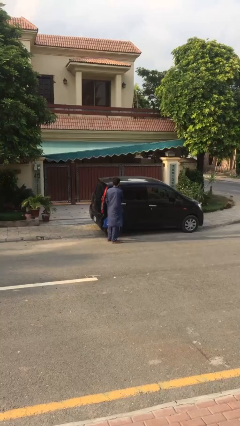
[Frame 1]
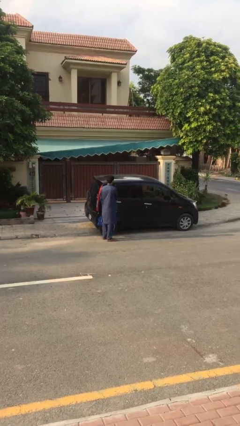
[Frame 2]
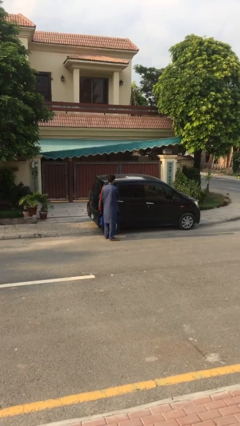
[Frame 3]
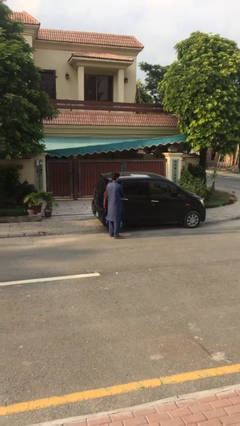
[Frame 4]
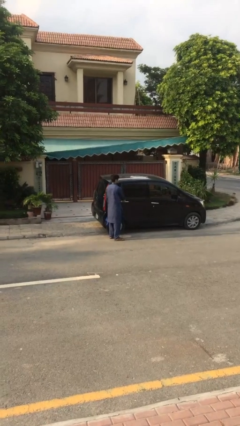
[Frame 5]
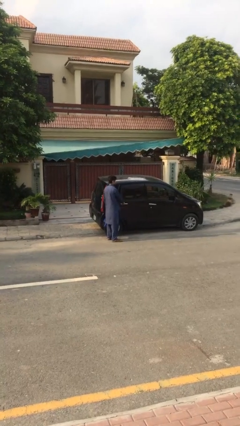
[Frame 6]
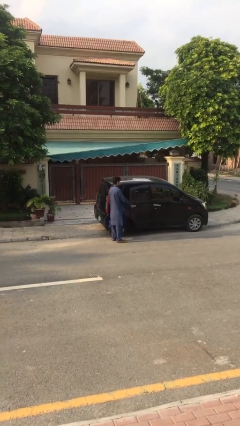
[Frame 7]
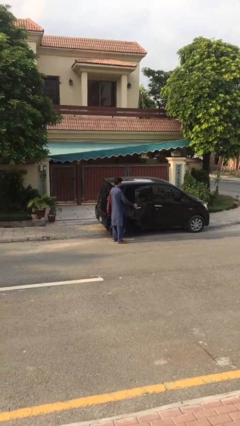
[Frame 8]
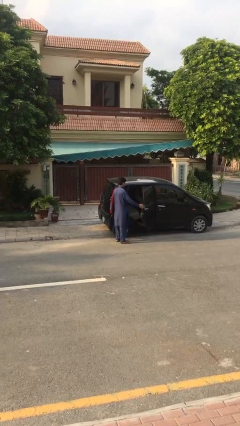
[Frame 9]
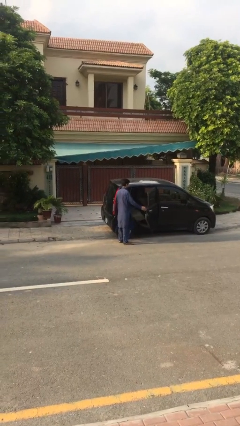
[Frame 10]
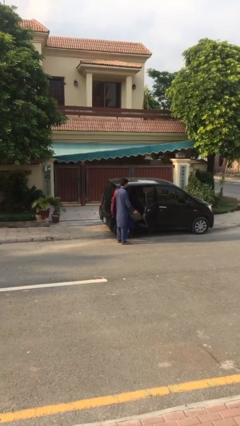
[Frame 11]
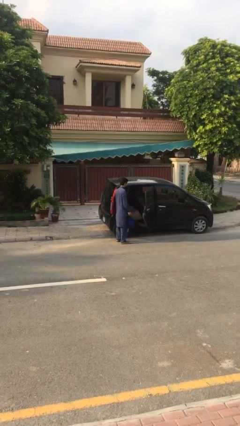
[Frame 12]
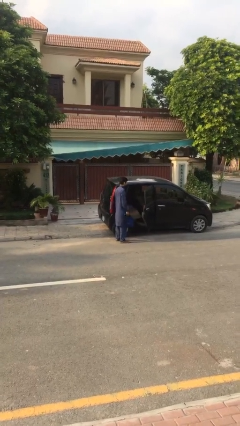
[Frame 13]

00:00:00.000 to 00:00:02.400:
person opens car door

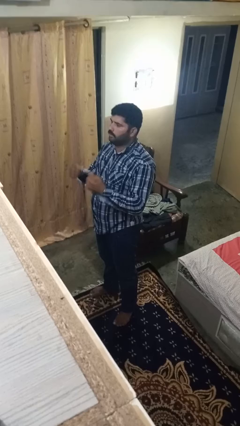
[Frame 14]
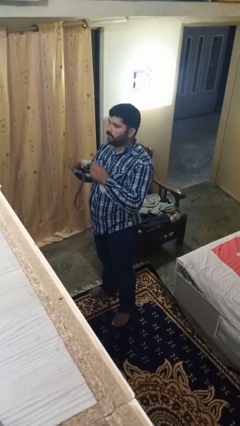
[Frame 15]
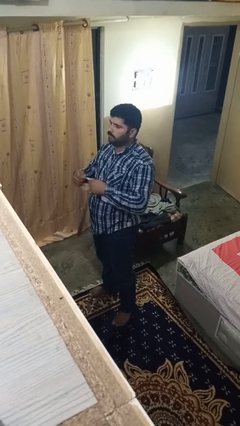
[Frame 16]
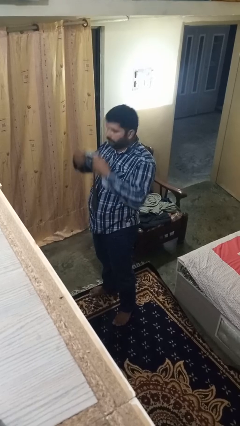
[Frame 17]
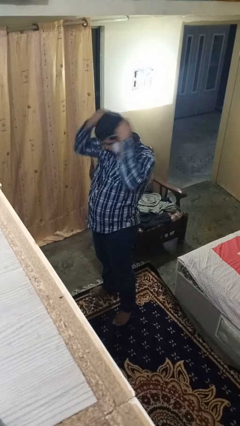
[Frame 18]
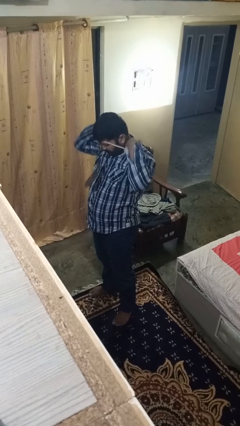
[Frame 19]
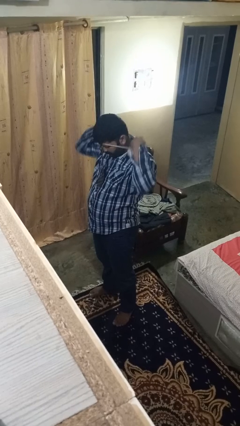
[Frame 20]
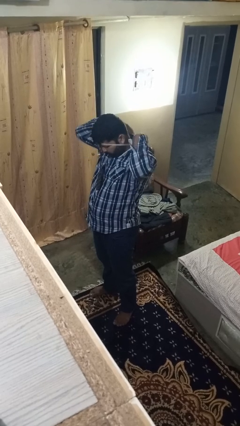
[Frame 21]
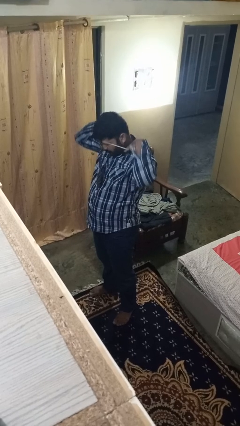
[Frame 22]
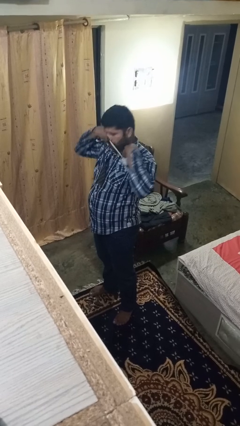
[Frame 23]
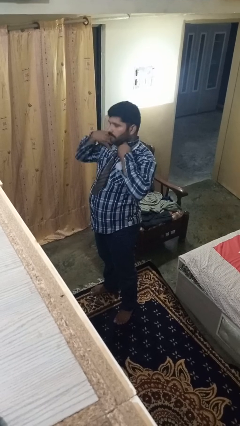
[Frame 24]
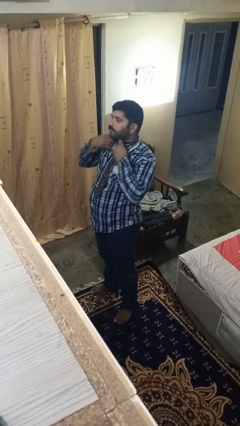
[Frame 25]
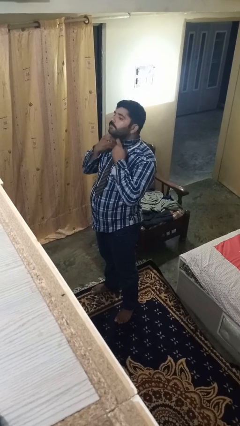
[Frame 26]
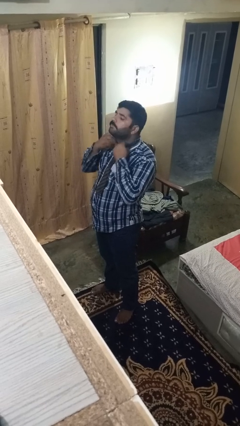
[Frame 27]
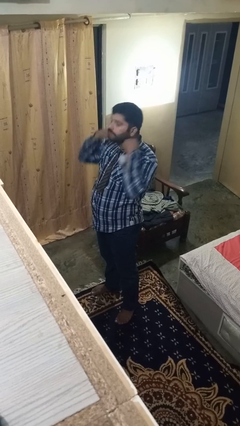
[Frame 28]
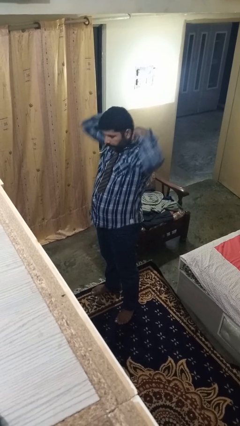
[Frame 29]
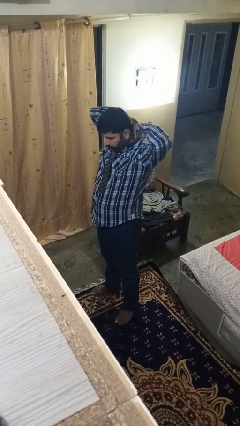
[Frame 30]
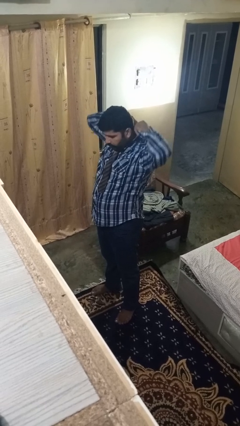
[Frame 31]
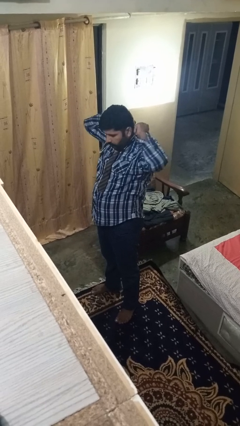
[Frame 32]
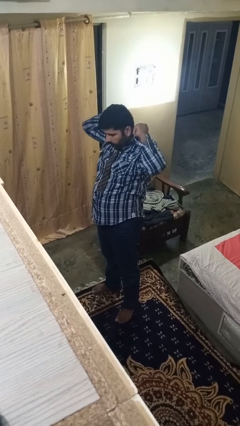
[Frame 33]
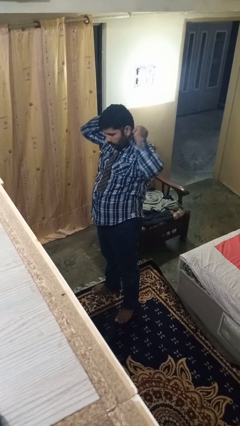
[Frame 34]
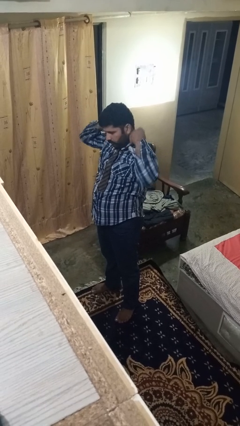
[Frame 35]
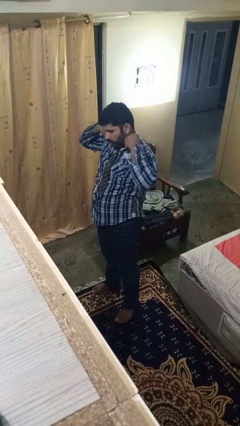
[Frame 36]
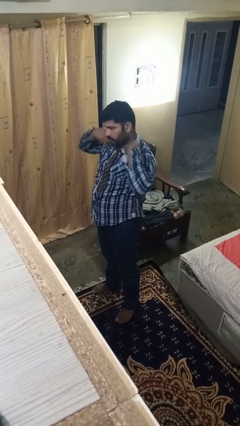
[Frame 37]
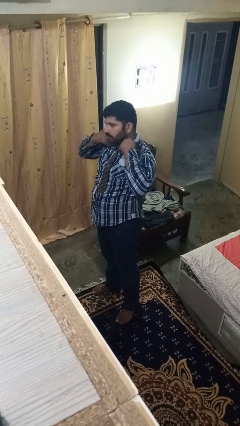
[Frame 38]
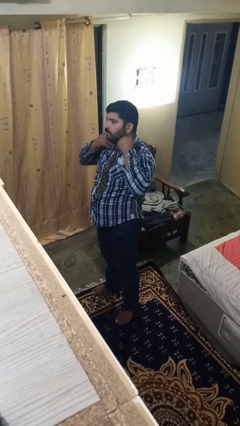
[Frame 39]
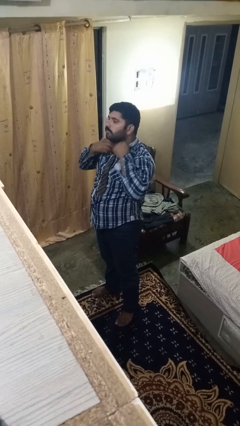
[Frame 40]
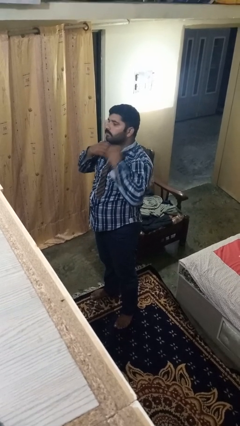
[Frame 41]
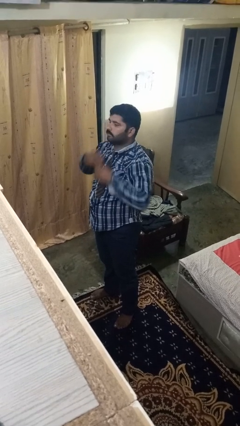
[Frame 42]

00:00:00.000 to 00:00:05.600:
person puts on necktie

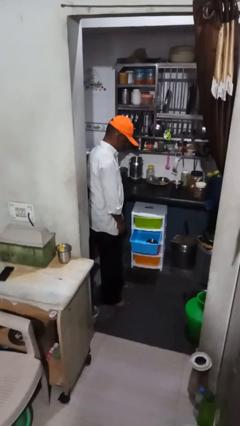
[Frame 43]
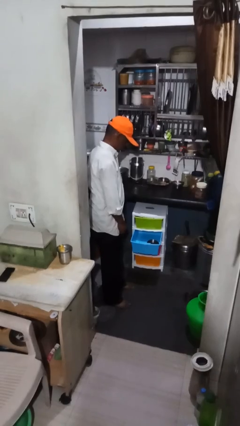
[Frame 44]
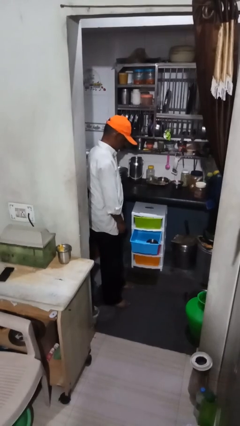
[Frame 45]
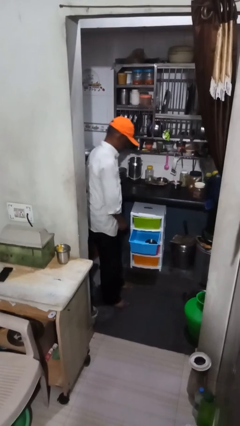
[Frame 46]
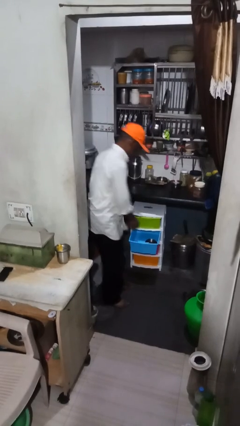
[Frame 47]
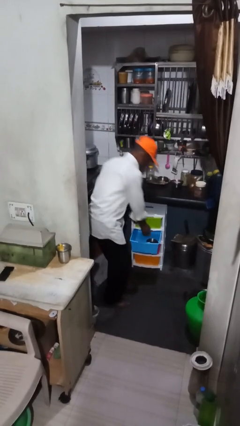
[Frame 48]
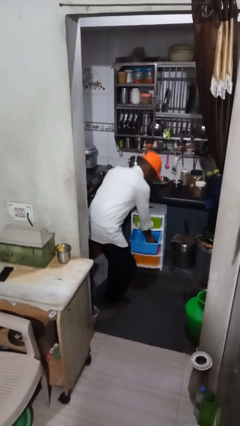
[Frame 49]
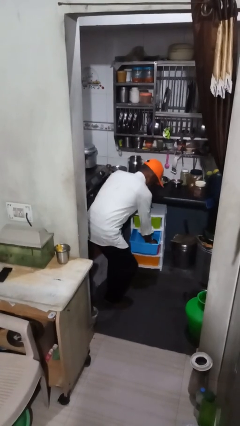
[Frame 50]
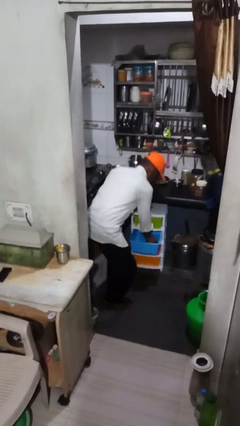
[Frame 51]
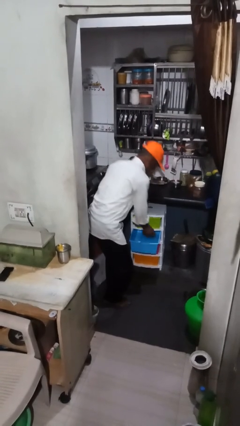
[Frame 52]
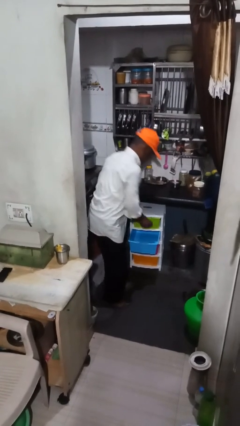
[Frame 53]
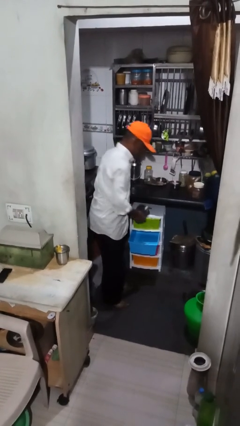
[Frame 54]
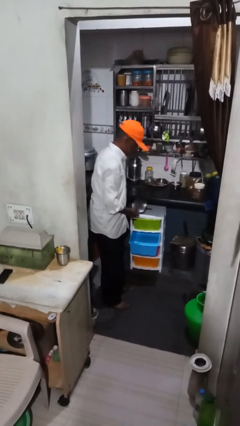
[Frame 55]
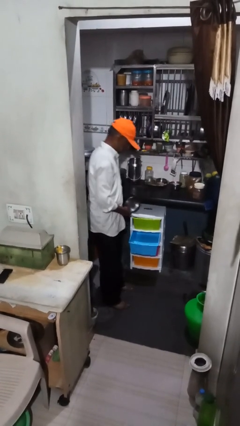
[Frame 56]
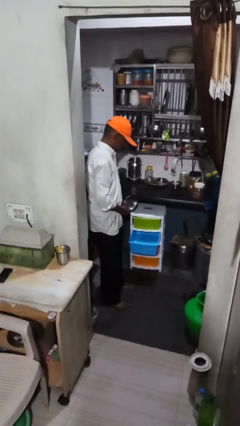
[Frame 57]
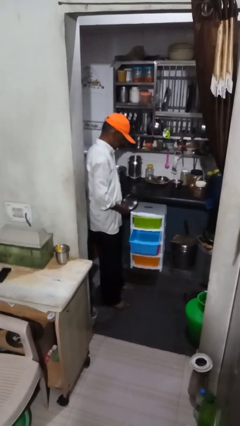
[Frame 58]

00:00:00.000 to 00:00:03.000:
person takes object from cabinet

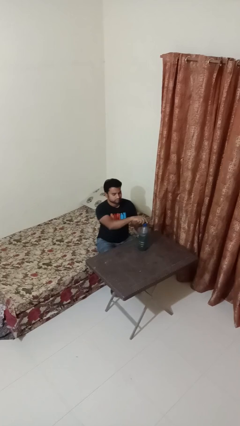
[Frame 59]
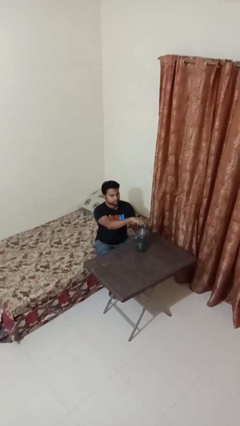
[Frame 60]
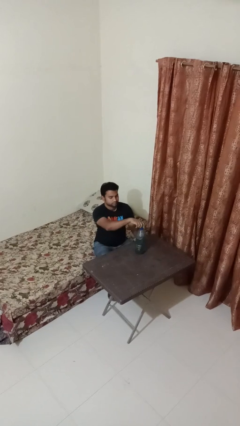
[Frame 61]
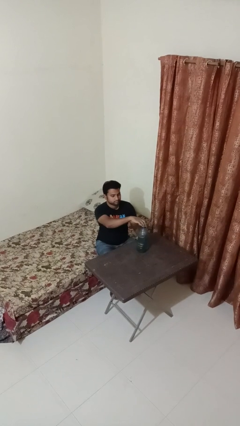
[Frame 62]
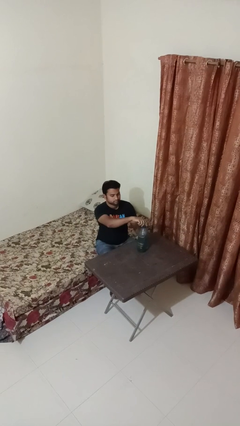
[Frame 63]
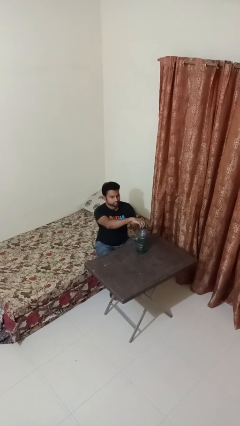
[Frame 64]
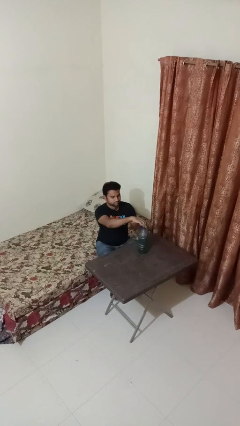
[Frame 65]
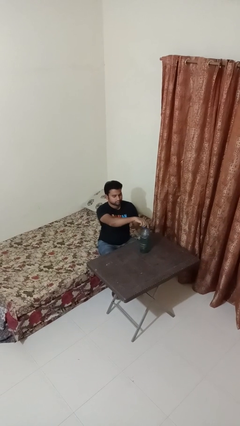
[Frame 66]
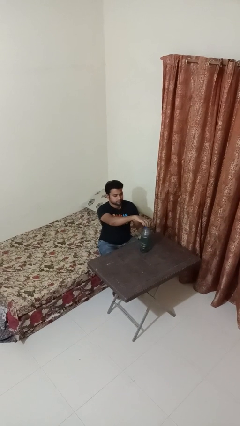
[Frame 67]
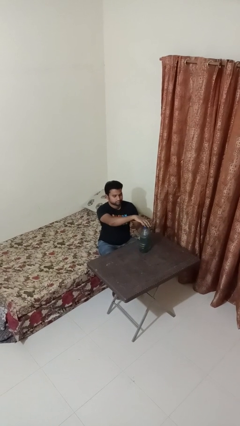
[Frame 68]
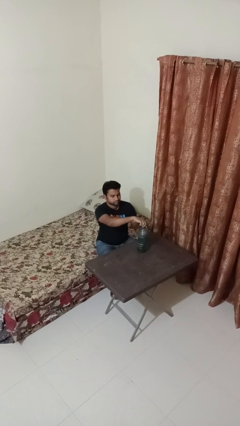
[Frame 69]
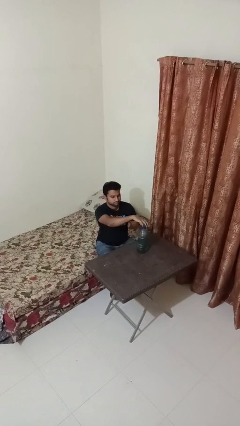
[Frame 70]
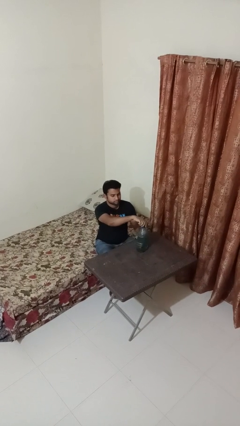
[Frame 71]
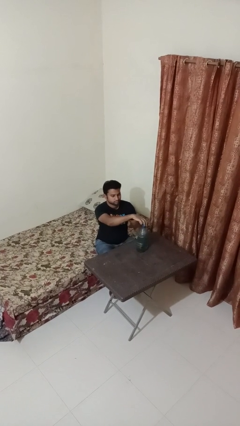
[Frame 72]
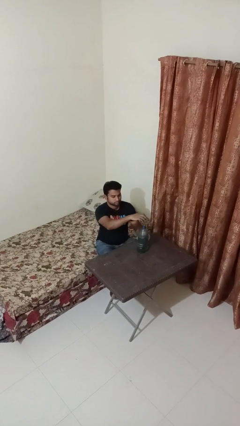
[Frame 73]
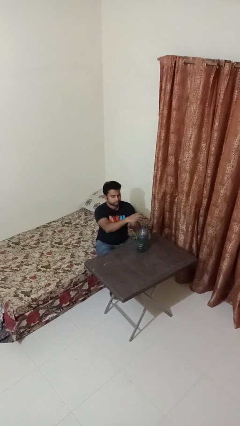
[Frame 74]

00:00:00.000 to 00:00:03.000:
person unscrews lid from bottle

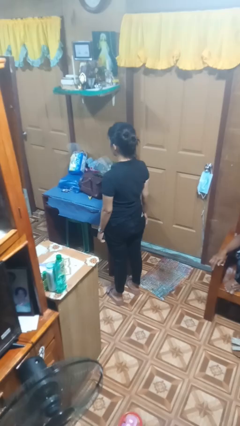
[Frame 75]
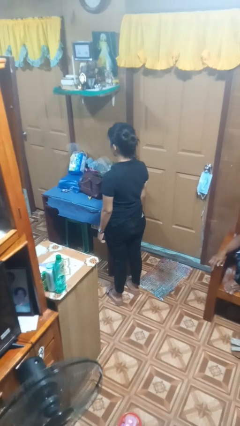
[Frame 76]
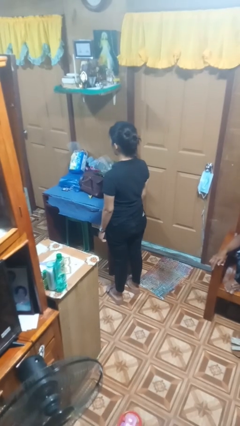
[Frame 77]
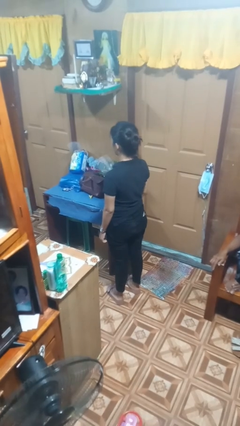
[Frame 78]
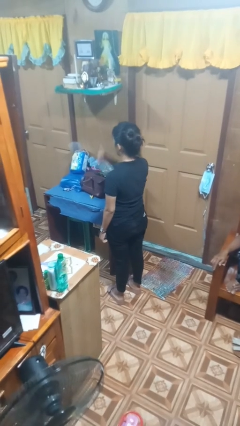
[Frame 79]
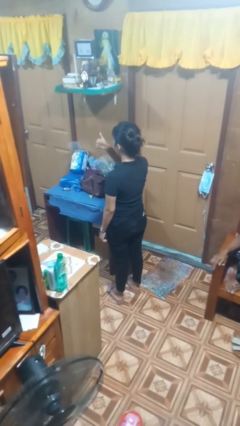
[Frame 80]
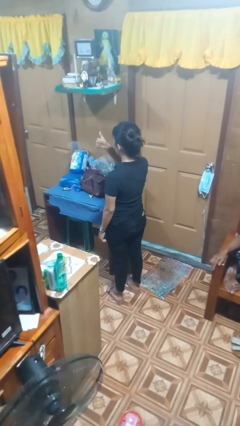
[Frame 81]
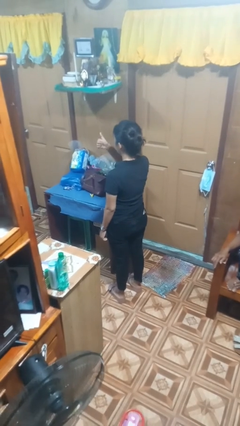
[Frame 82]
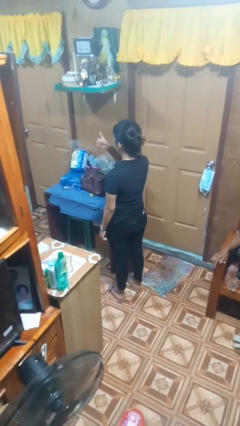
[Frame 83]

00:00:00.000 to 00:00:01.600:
person gestures thumbs up

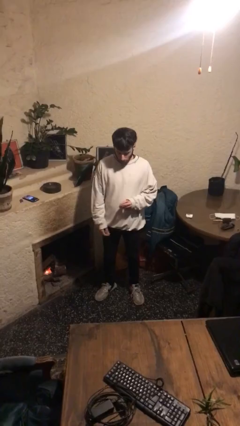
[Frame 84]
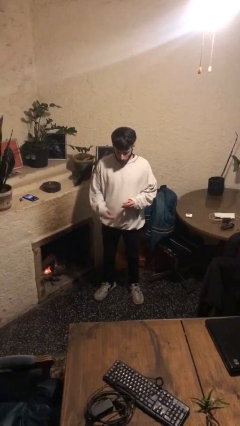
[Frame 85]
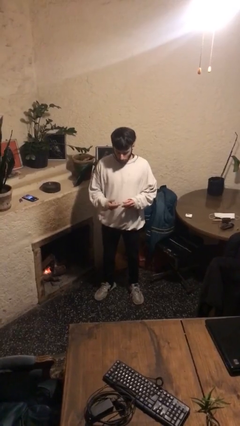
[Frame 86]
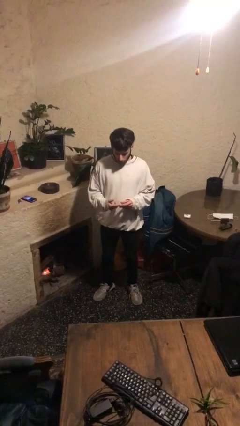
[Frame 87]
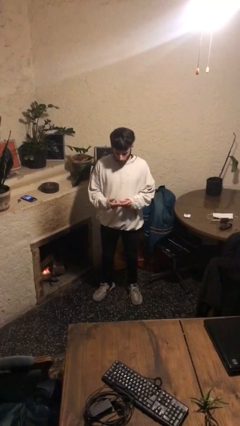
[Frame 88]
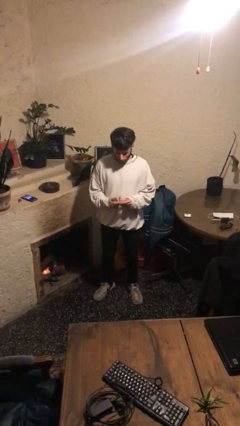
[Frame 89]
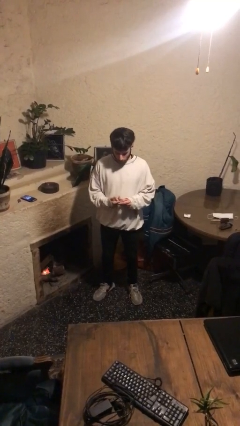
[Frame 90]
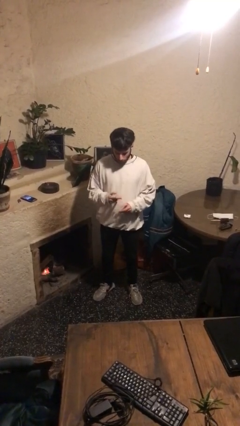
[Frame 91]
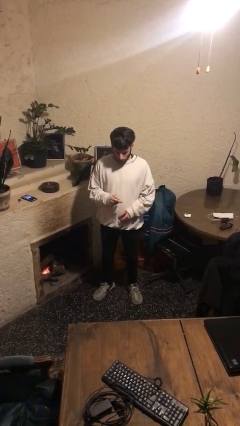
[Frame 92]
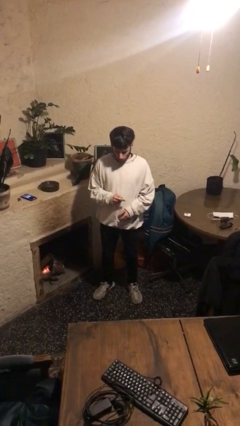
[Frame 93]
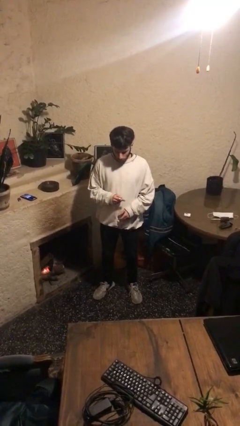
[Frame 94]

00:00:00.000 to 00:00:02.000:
person puts on ring
